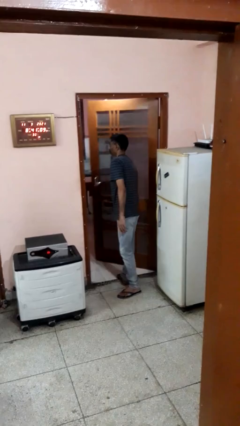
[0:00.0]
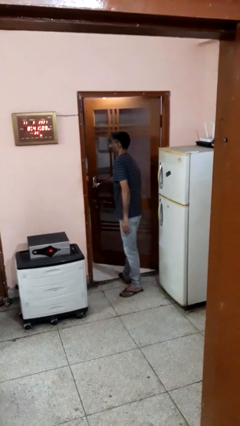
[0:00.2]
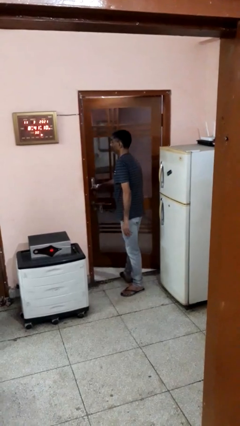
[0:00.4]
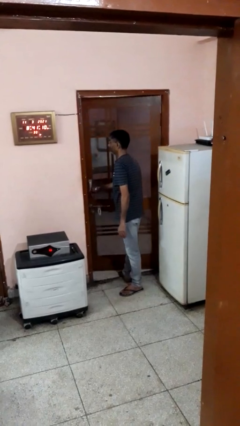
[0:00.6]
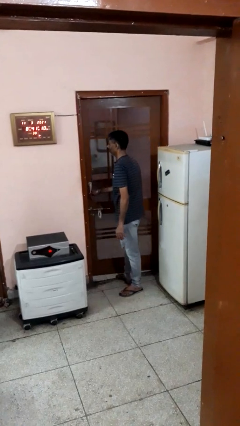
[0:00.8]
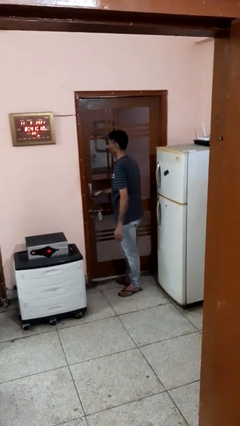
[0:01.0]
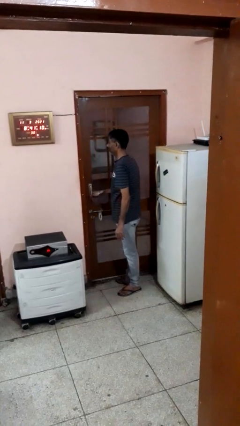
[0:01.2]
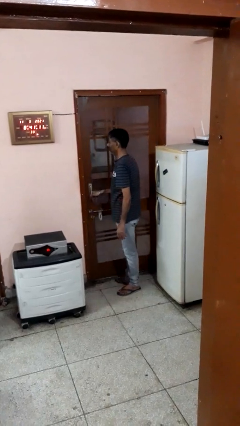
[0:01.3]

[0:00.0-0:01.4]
person closes facility door

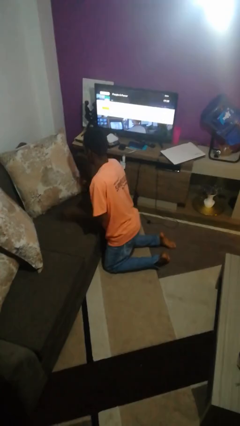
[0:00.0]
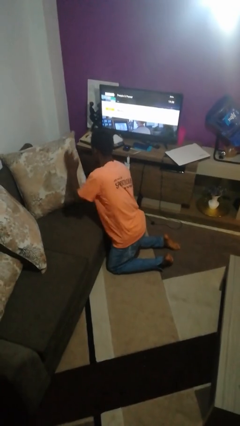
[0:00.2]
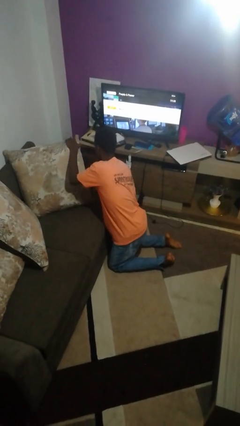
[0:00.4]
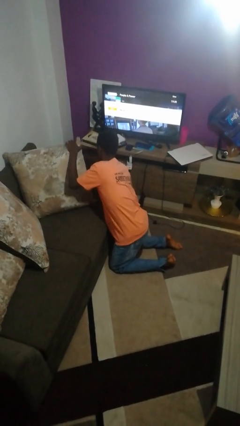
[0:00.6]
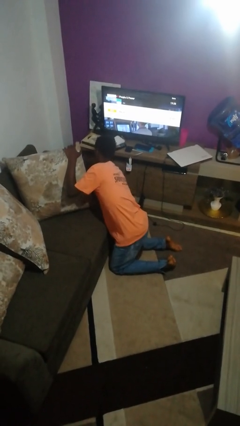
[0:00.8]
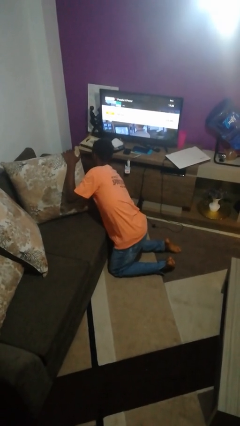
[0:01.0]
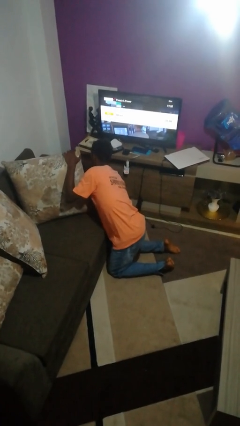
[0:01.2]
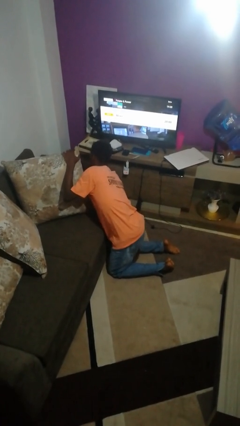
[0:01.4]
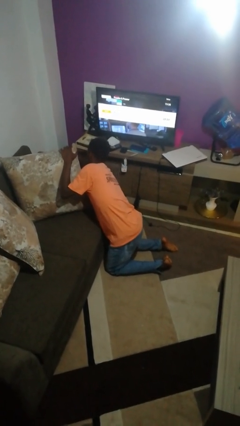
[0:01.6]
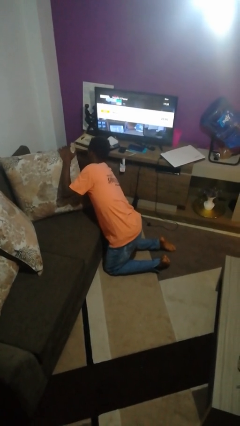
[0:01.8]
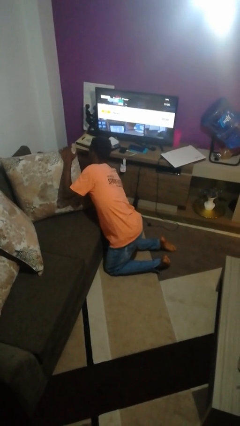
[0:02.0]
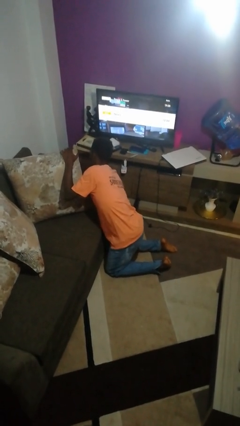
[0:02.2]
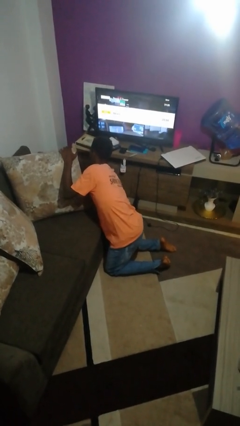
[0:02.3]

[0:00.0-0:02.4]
person searches in couch

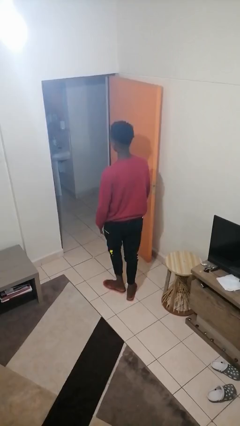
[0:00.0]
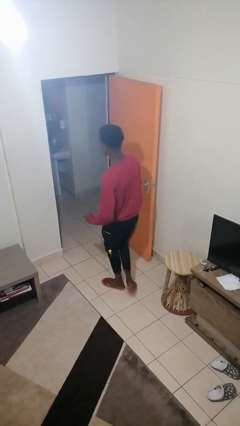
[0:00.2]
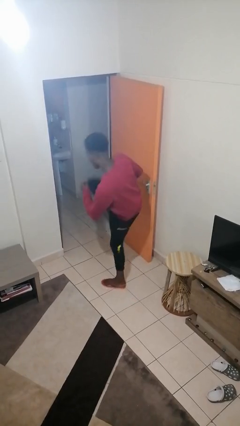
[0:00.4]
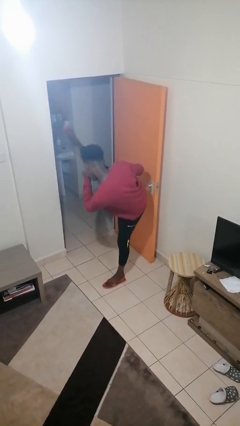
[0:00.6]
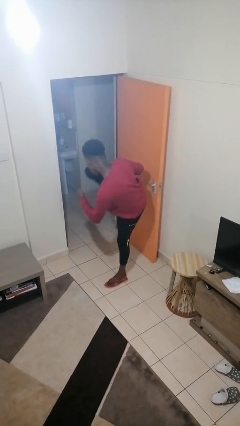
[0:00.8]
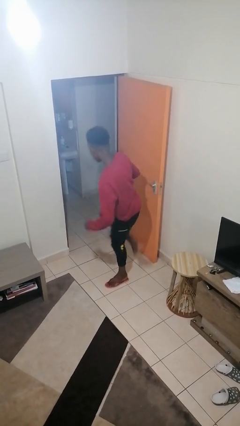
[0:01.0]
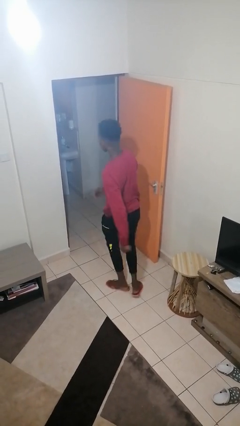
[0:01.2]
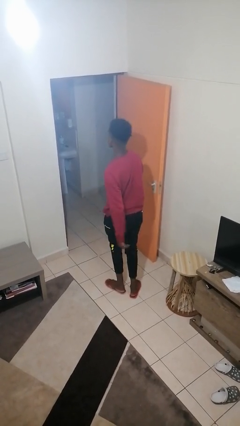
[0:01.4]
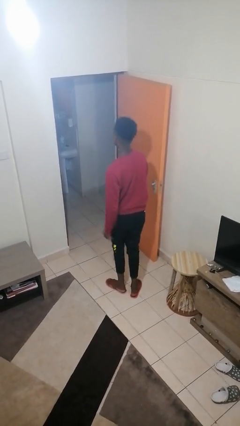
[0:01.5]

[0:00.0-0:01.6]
person karate kicks

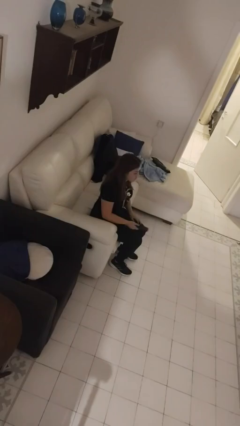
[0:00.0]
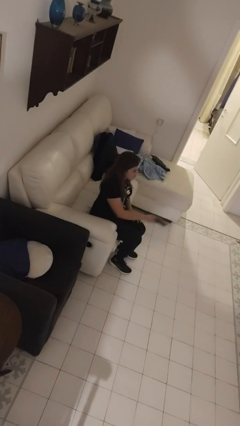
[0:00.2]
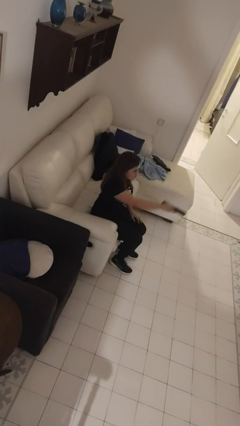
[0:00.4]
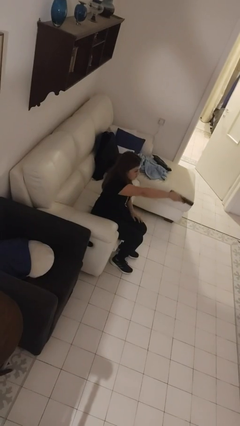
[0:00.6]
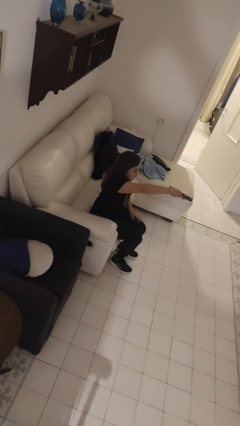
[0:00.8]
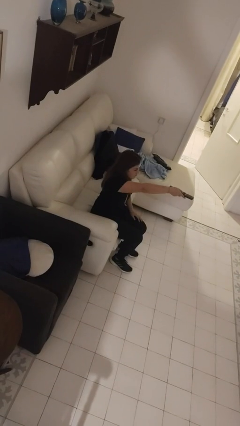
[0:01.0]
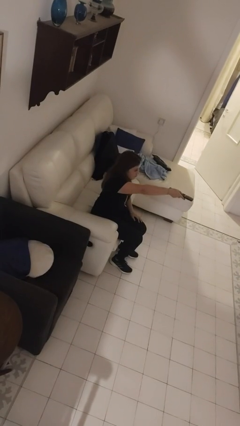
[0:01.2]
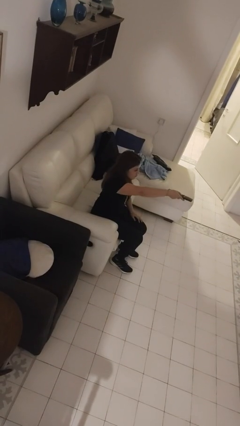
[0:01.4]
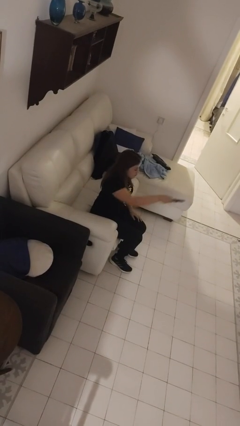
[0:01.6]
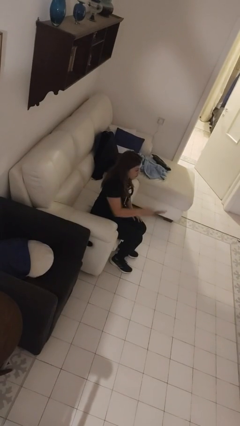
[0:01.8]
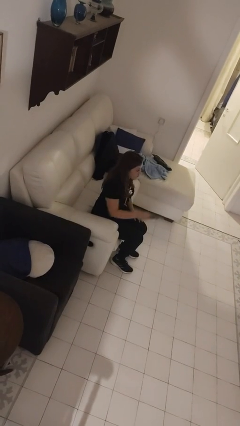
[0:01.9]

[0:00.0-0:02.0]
person uses television remote

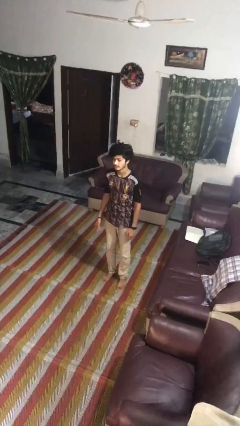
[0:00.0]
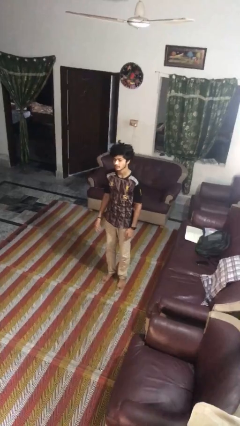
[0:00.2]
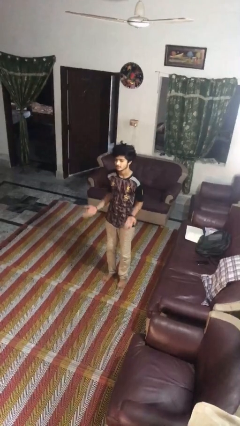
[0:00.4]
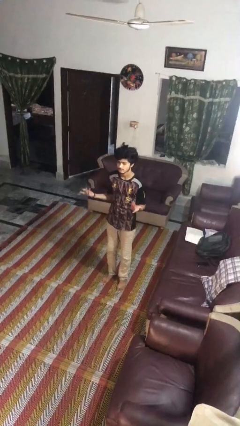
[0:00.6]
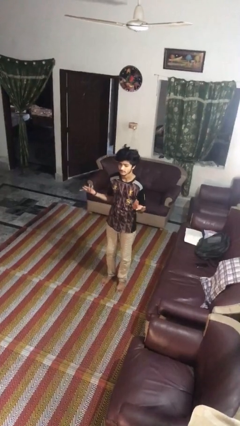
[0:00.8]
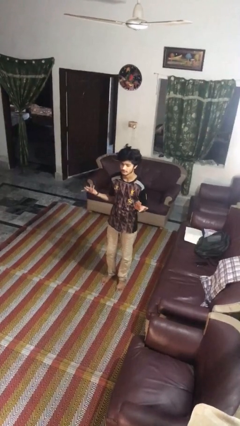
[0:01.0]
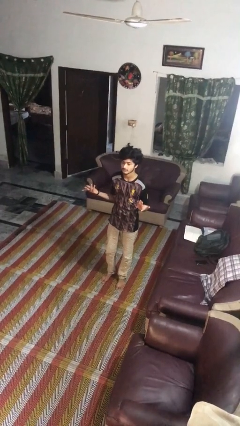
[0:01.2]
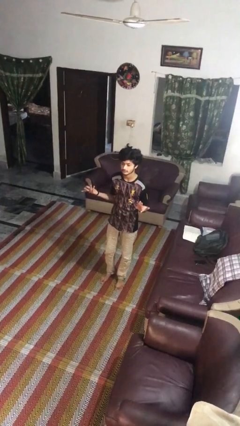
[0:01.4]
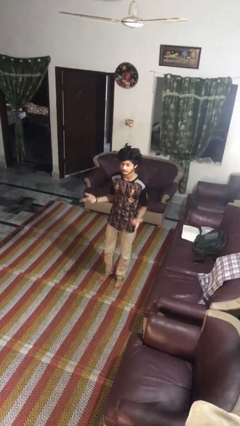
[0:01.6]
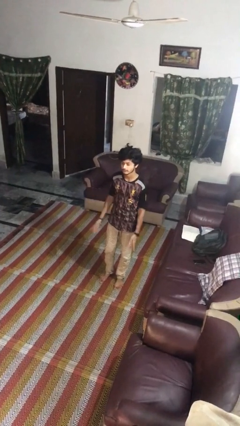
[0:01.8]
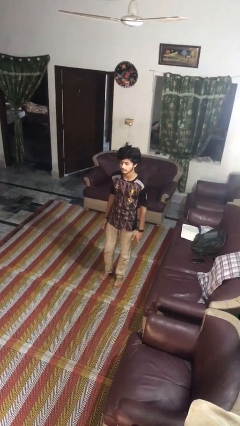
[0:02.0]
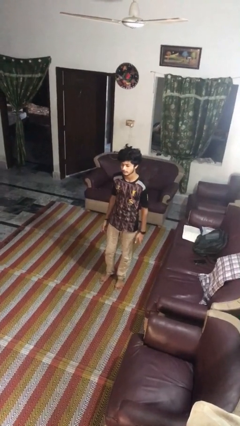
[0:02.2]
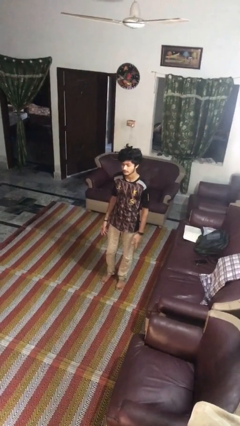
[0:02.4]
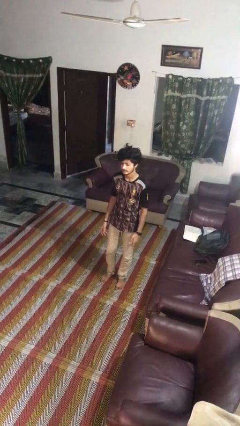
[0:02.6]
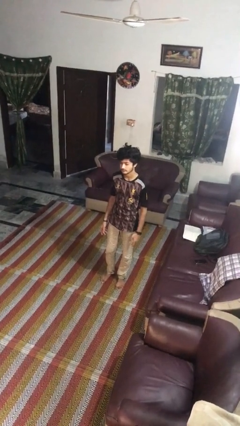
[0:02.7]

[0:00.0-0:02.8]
person shrugs

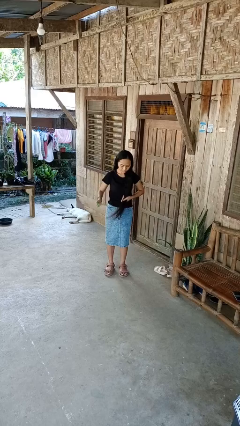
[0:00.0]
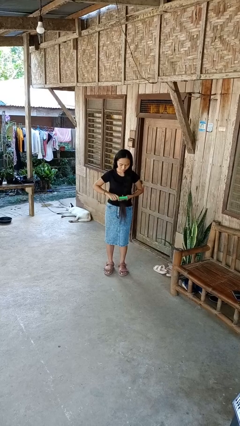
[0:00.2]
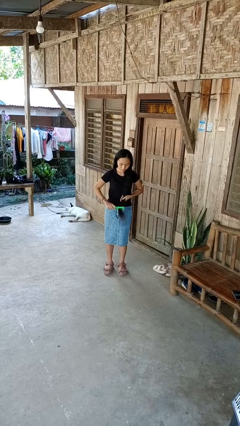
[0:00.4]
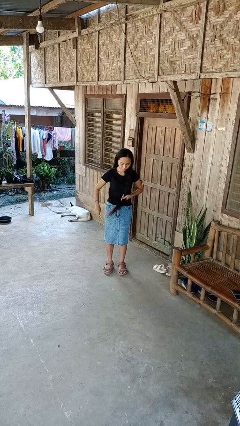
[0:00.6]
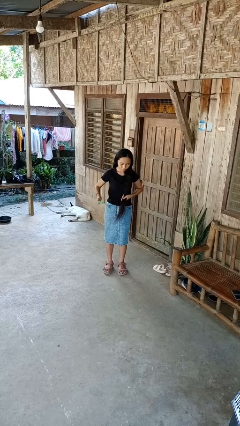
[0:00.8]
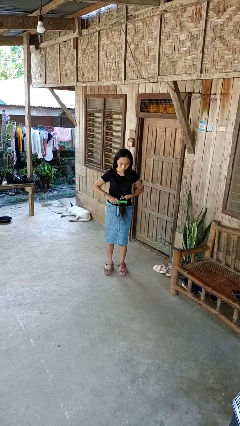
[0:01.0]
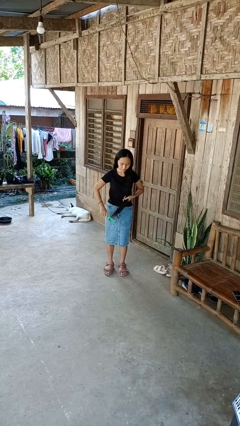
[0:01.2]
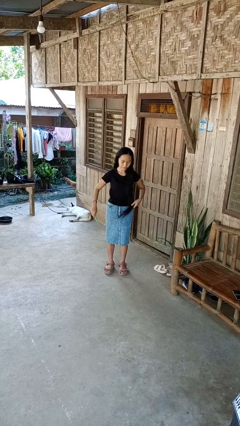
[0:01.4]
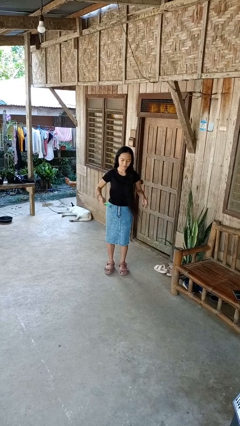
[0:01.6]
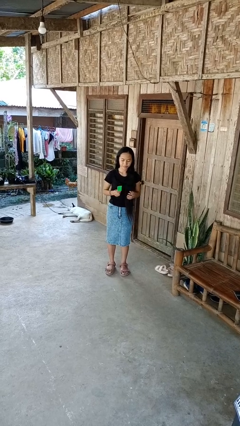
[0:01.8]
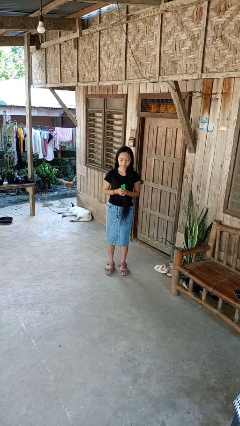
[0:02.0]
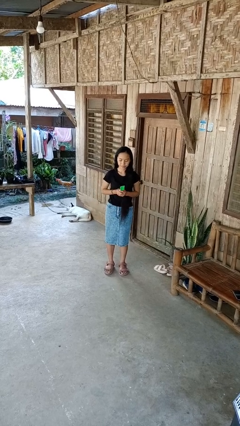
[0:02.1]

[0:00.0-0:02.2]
person brushes hair

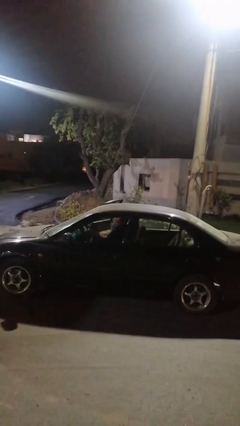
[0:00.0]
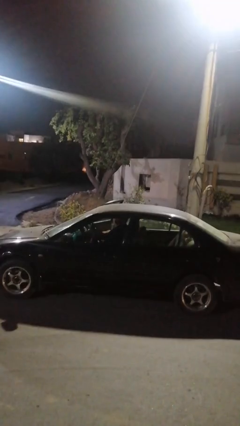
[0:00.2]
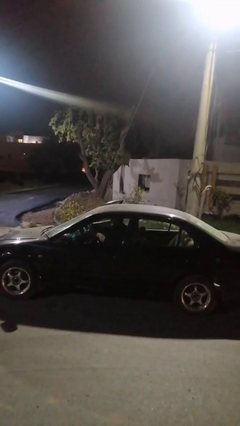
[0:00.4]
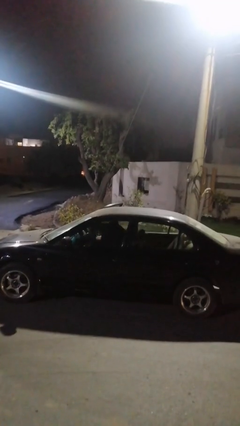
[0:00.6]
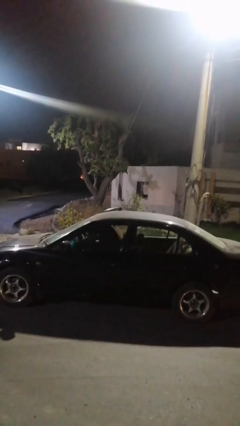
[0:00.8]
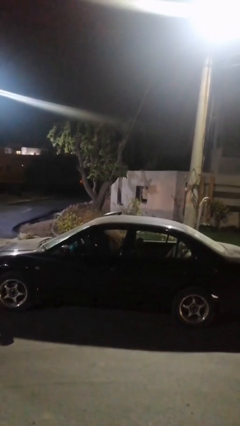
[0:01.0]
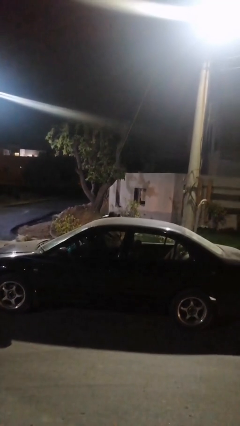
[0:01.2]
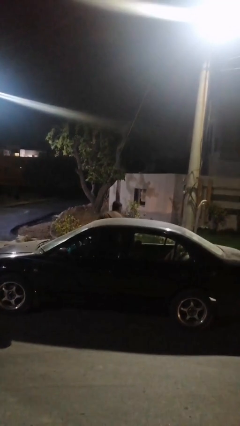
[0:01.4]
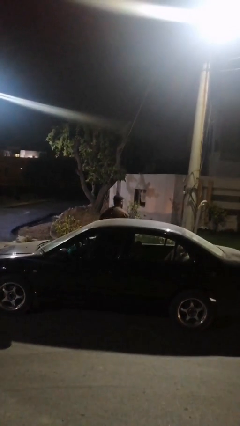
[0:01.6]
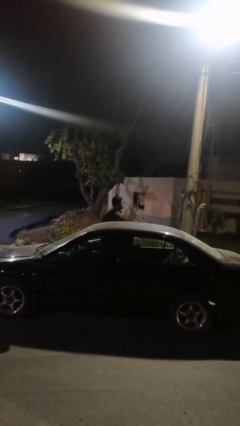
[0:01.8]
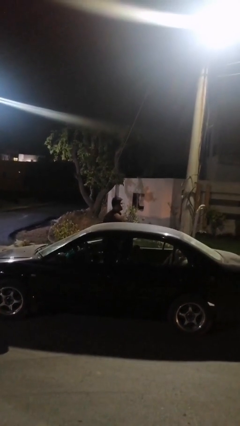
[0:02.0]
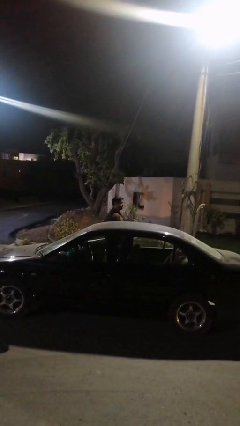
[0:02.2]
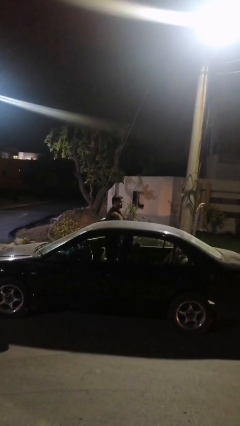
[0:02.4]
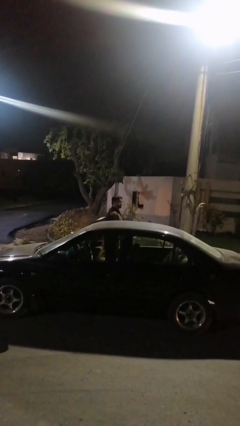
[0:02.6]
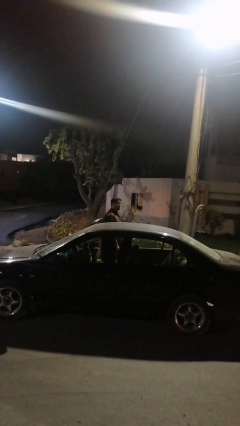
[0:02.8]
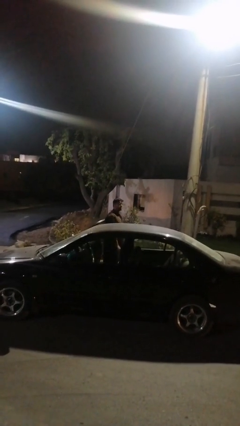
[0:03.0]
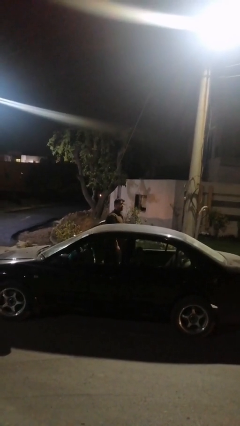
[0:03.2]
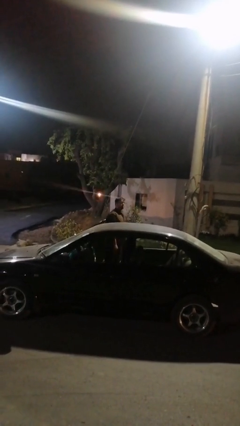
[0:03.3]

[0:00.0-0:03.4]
person exits car

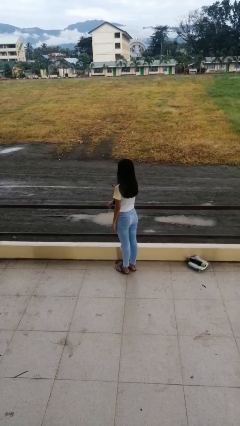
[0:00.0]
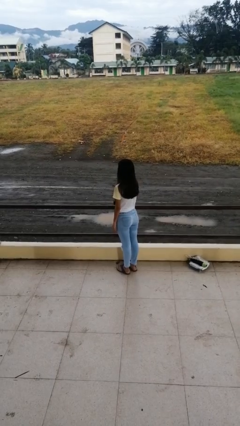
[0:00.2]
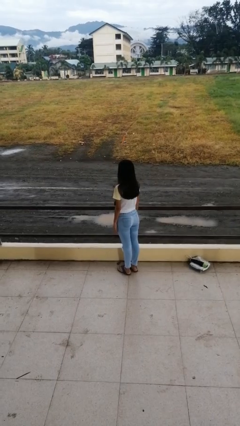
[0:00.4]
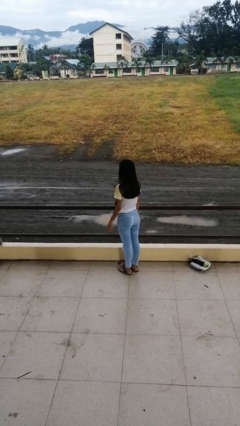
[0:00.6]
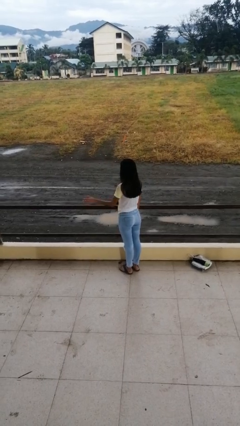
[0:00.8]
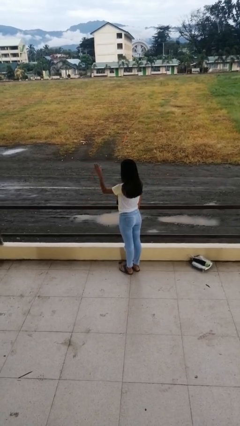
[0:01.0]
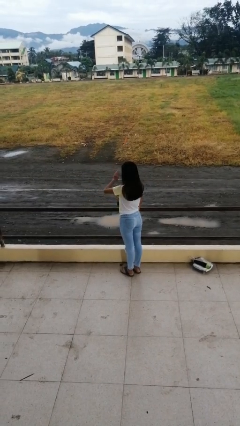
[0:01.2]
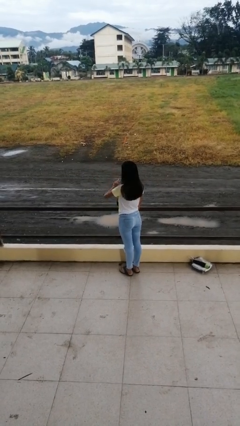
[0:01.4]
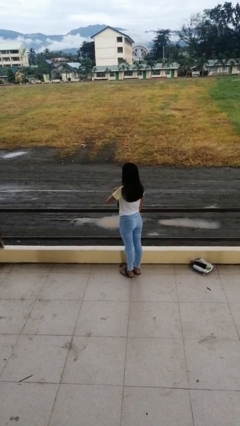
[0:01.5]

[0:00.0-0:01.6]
person gestures swipe right
